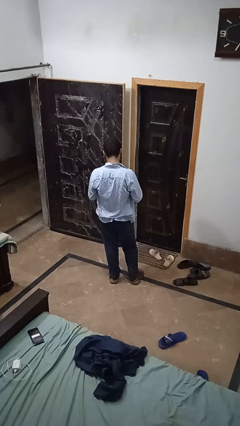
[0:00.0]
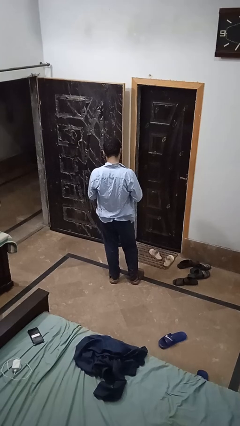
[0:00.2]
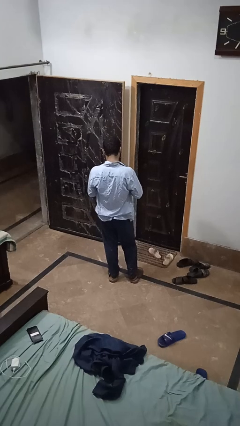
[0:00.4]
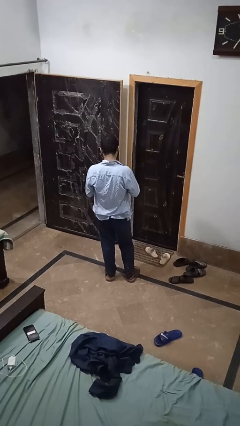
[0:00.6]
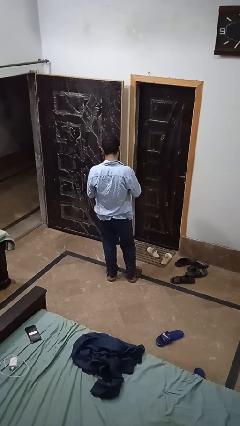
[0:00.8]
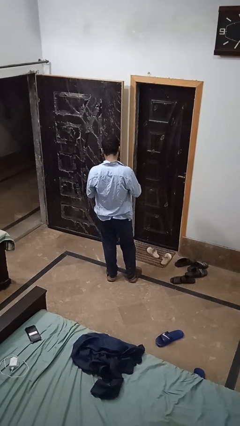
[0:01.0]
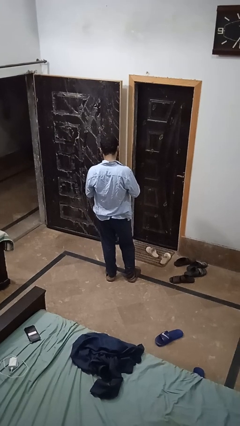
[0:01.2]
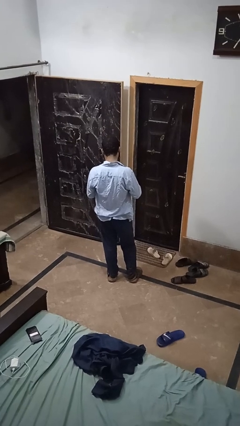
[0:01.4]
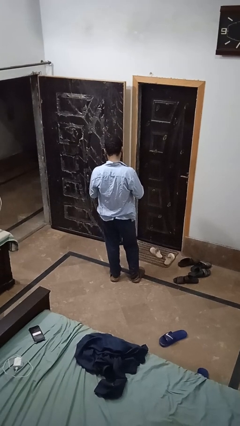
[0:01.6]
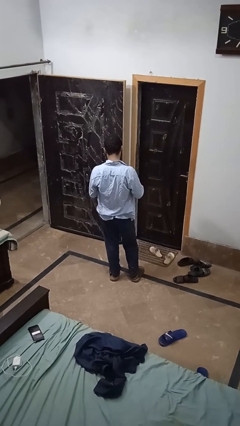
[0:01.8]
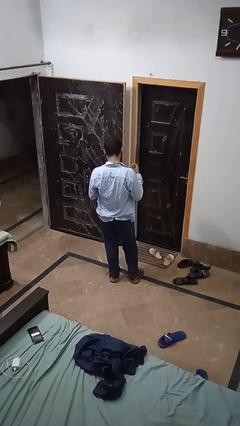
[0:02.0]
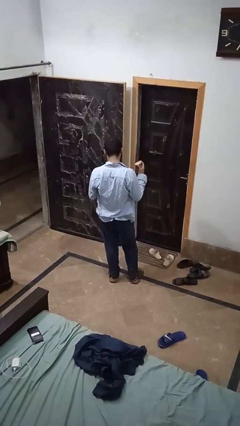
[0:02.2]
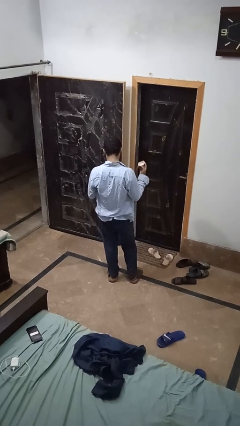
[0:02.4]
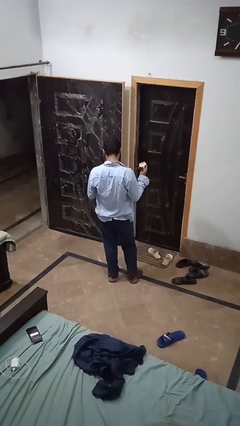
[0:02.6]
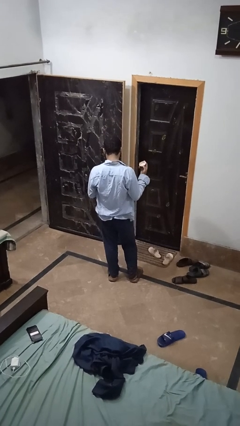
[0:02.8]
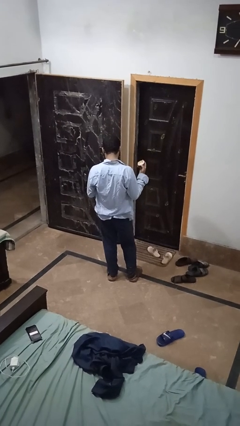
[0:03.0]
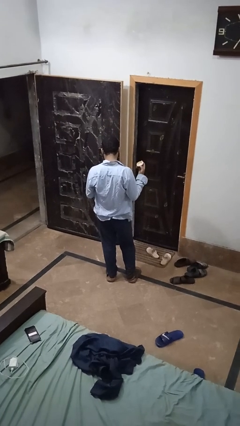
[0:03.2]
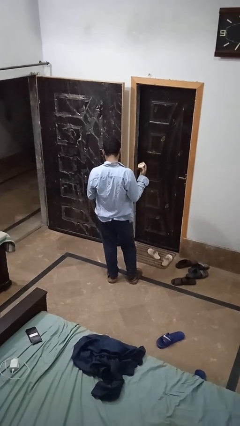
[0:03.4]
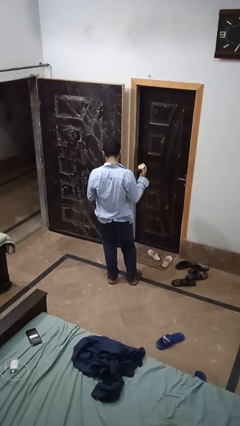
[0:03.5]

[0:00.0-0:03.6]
person opens jar

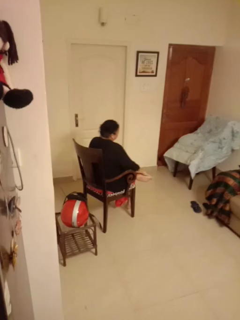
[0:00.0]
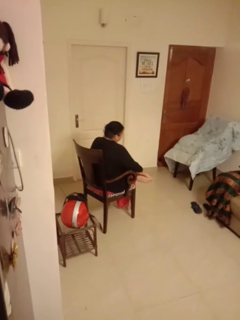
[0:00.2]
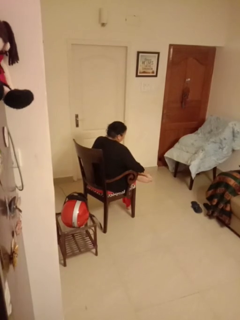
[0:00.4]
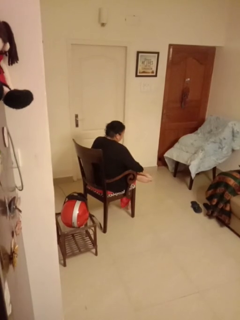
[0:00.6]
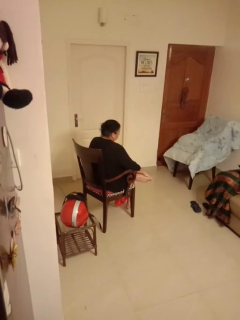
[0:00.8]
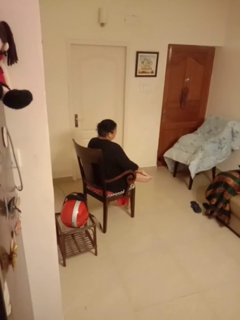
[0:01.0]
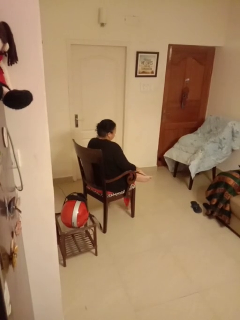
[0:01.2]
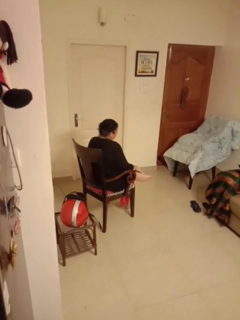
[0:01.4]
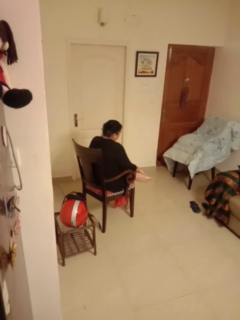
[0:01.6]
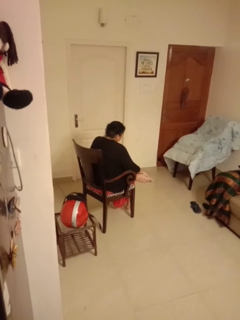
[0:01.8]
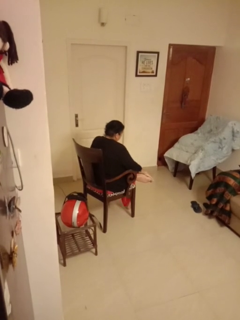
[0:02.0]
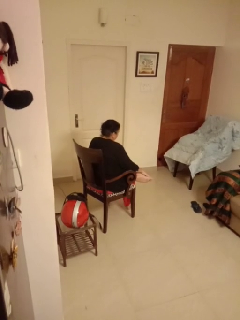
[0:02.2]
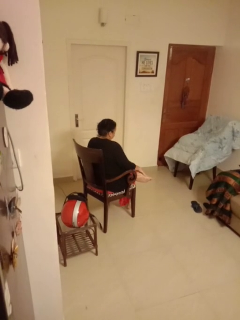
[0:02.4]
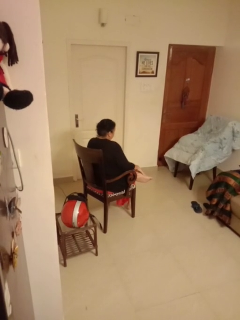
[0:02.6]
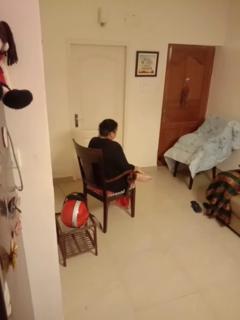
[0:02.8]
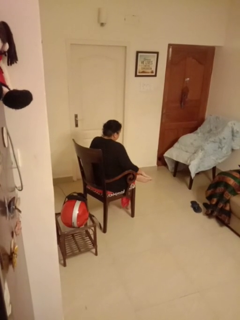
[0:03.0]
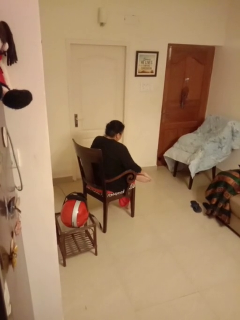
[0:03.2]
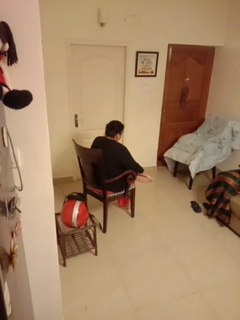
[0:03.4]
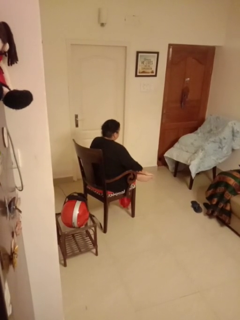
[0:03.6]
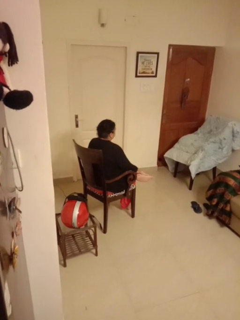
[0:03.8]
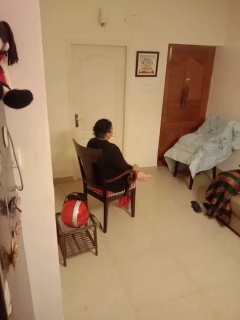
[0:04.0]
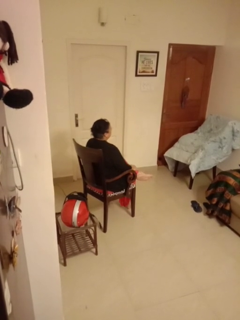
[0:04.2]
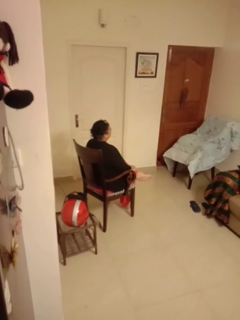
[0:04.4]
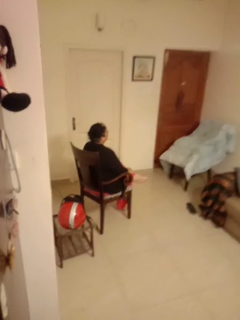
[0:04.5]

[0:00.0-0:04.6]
person rubs foot

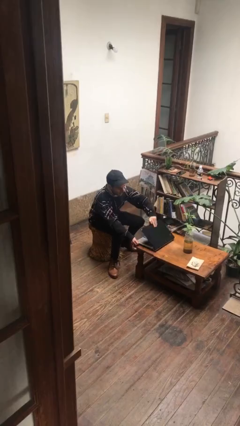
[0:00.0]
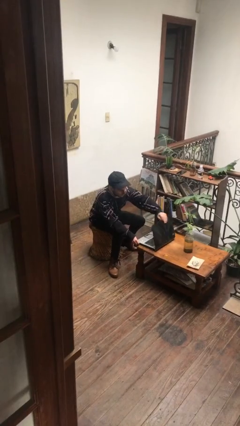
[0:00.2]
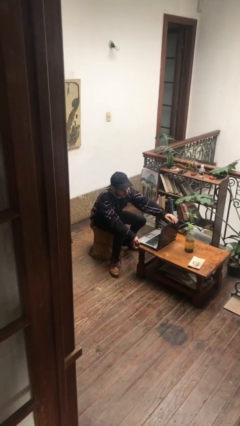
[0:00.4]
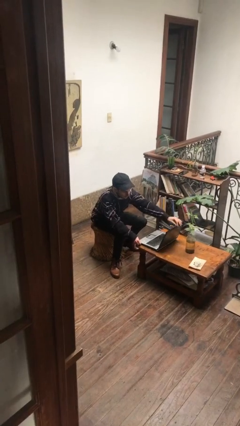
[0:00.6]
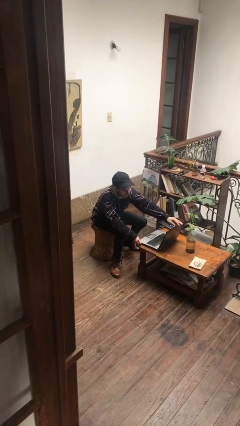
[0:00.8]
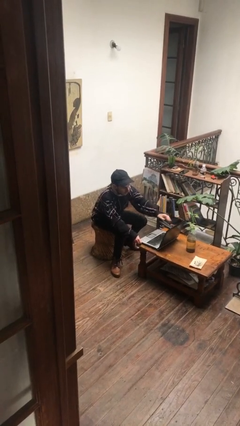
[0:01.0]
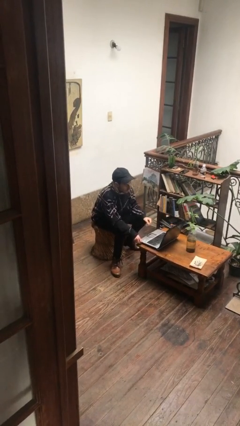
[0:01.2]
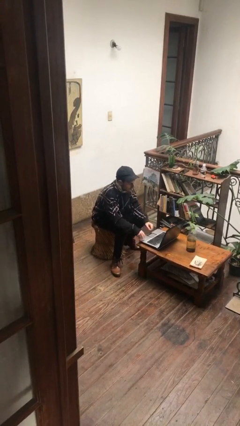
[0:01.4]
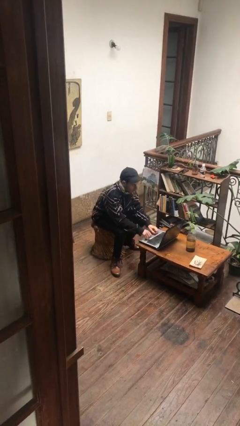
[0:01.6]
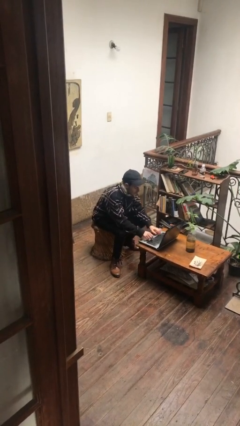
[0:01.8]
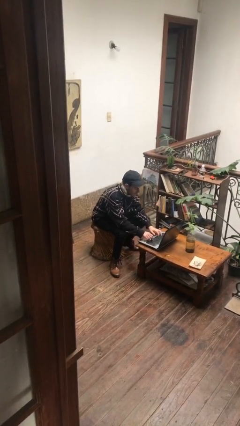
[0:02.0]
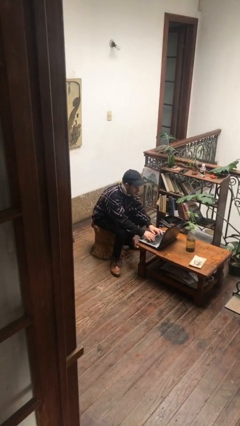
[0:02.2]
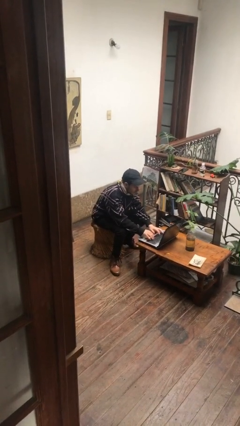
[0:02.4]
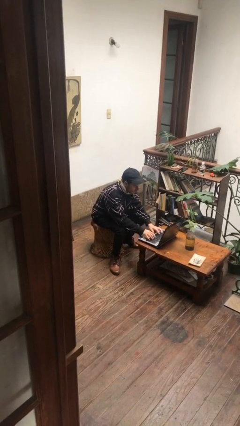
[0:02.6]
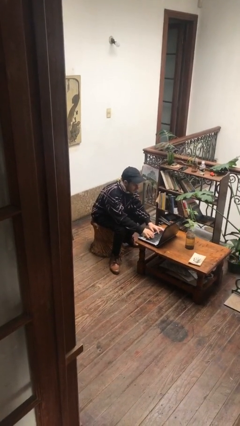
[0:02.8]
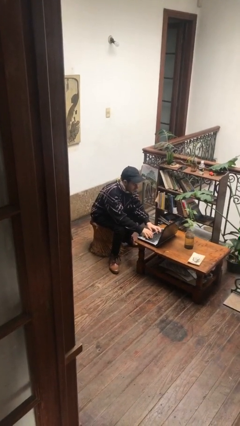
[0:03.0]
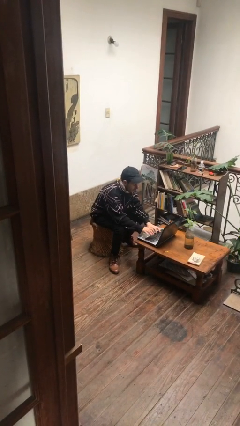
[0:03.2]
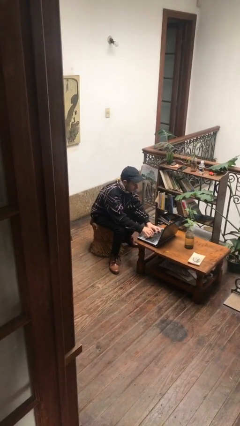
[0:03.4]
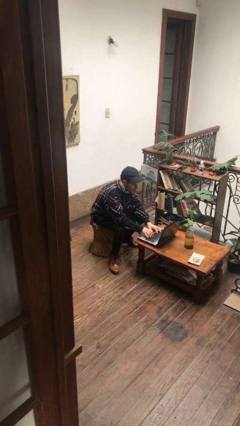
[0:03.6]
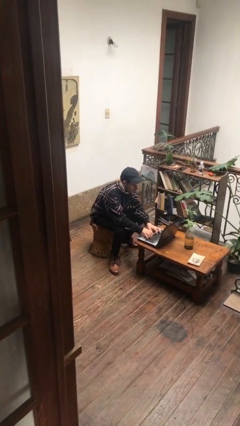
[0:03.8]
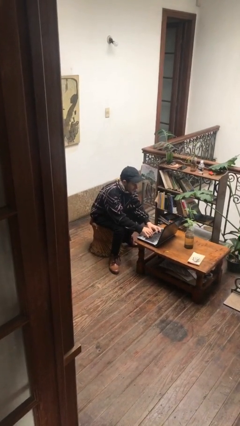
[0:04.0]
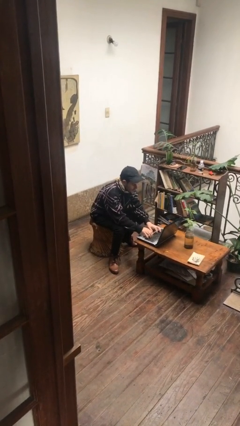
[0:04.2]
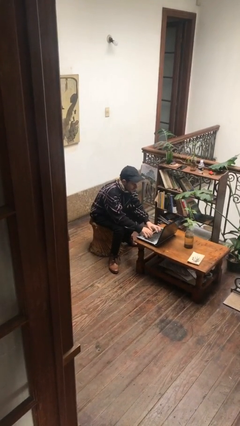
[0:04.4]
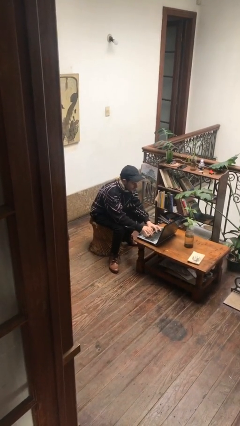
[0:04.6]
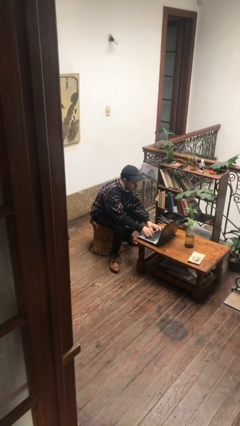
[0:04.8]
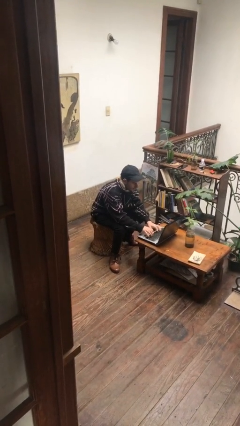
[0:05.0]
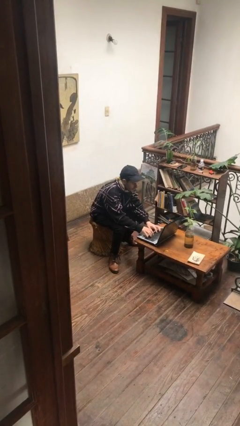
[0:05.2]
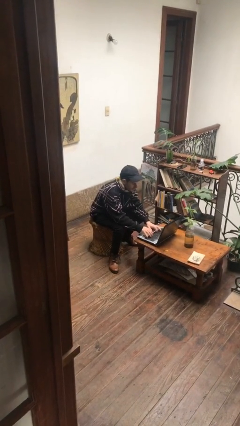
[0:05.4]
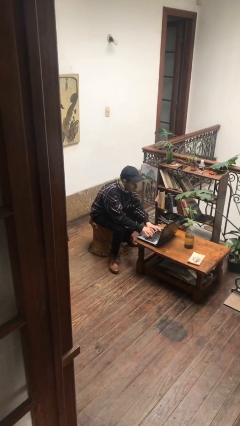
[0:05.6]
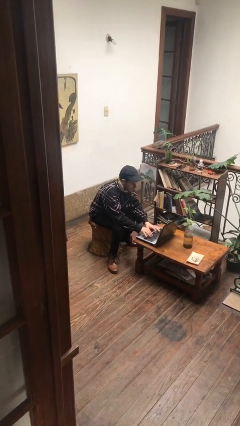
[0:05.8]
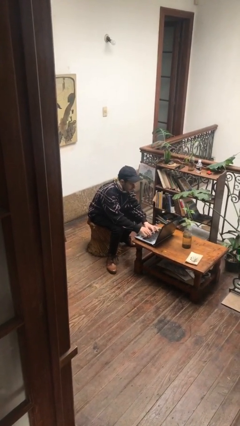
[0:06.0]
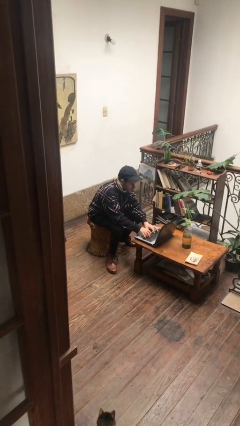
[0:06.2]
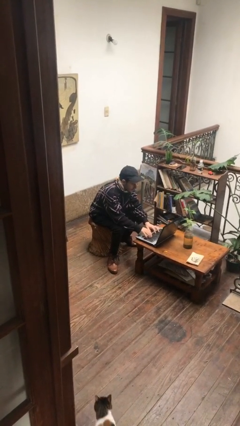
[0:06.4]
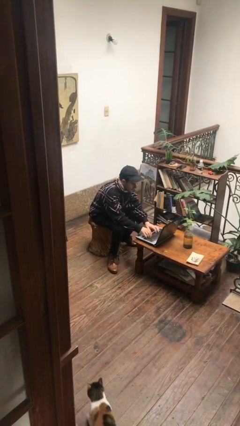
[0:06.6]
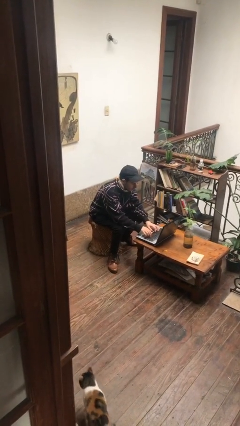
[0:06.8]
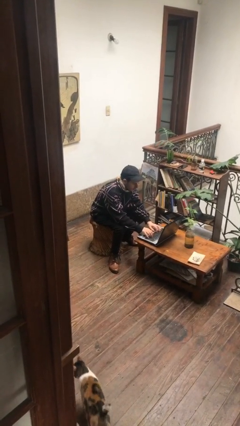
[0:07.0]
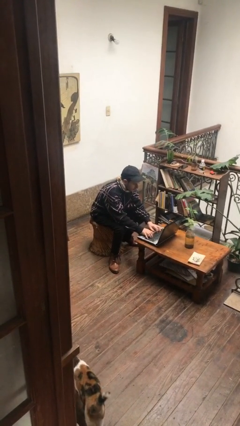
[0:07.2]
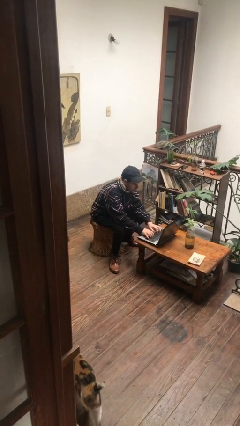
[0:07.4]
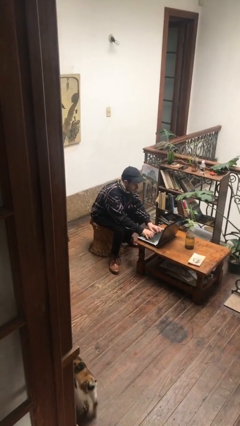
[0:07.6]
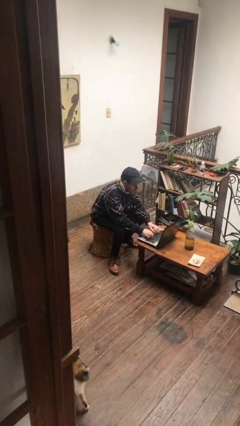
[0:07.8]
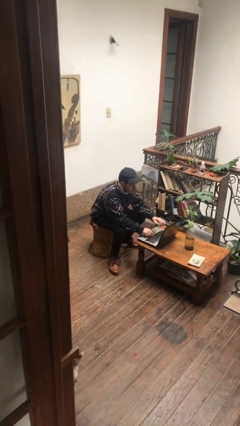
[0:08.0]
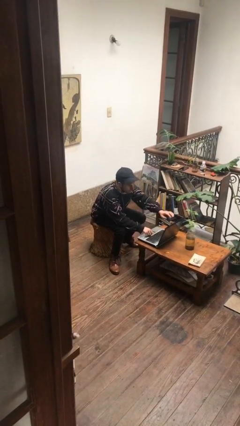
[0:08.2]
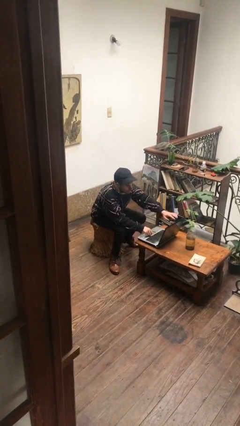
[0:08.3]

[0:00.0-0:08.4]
person interacts with laptop

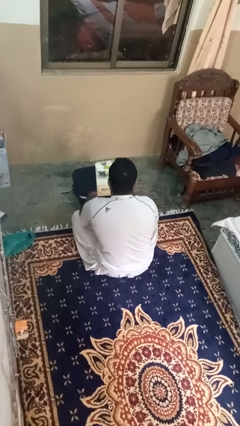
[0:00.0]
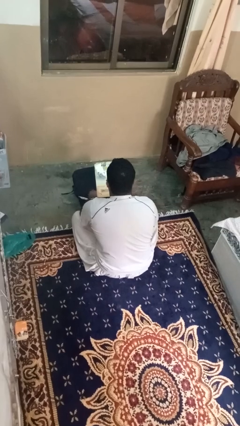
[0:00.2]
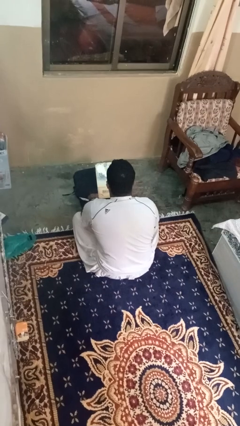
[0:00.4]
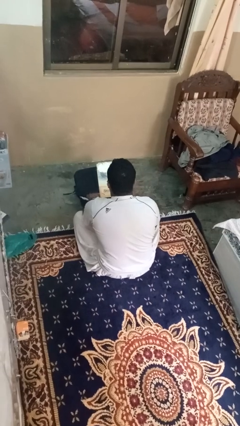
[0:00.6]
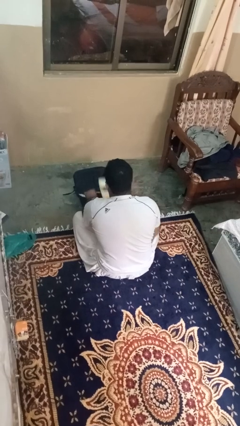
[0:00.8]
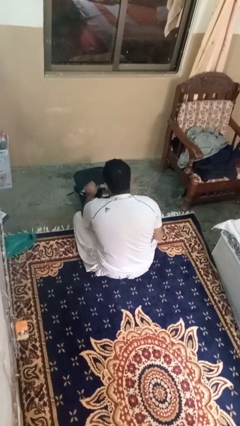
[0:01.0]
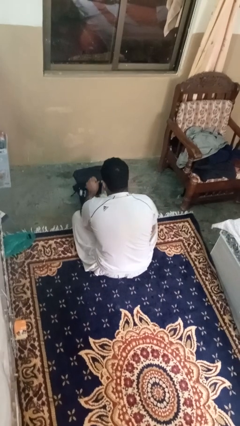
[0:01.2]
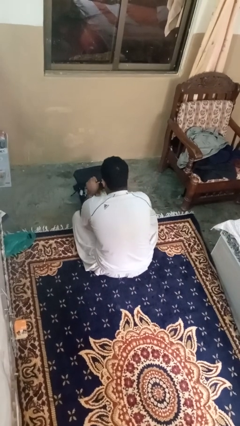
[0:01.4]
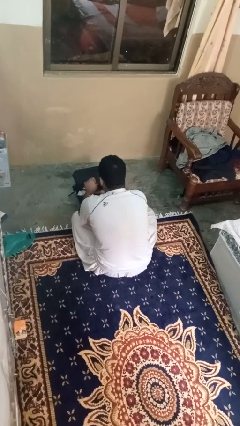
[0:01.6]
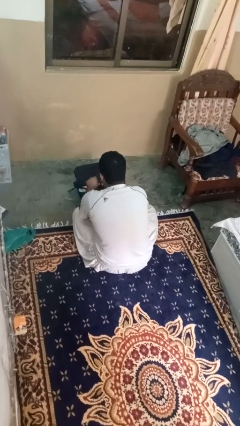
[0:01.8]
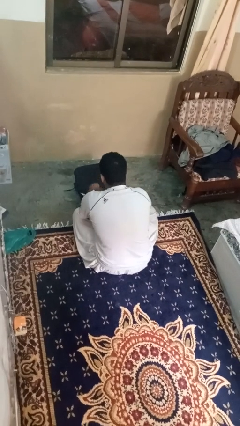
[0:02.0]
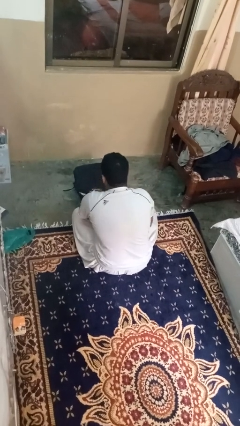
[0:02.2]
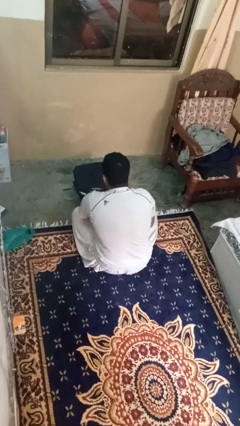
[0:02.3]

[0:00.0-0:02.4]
person puts object into bag

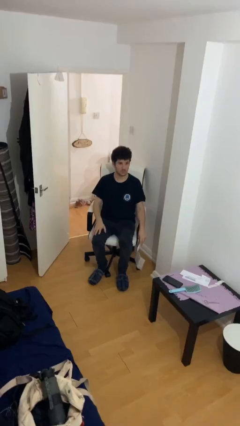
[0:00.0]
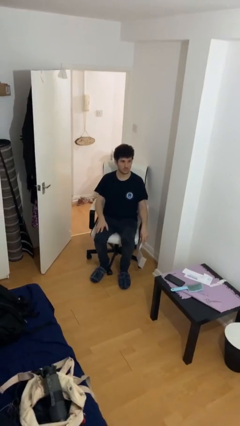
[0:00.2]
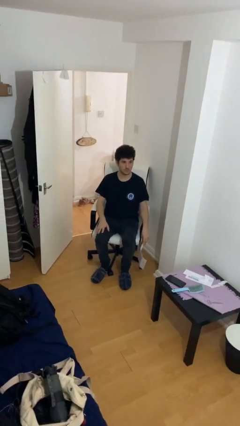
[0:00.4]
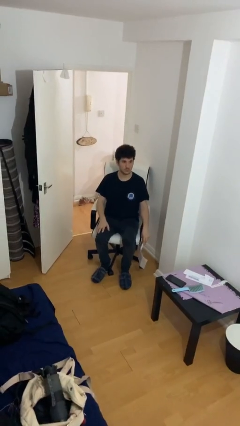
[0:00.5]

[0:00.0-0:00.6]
person reads document
